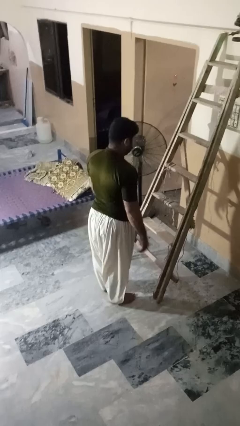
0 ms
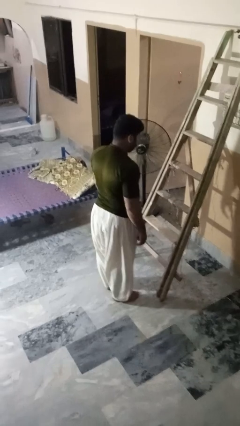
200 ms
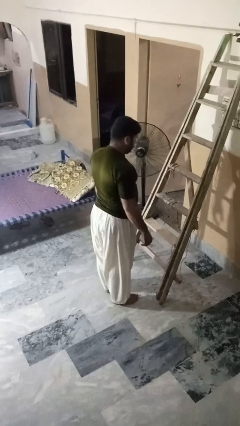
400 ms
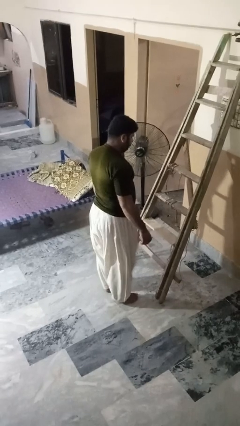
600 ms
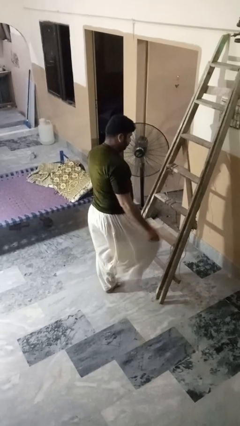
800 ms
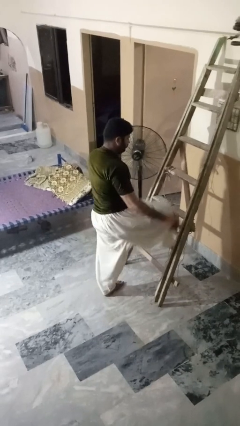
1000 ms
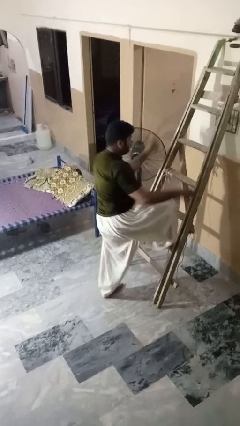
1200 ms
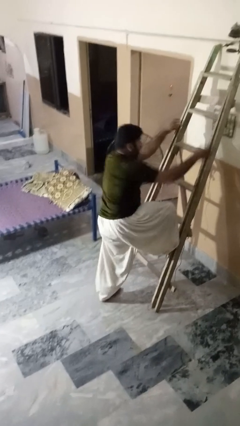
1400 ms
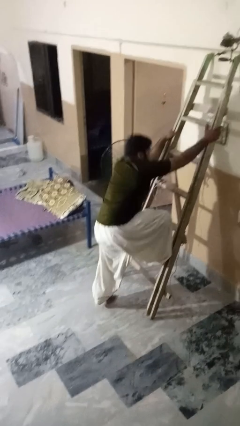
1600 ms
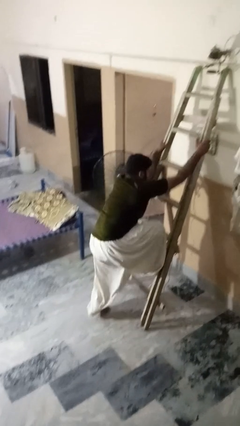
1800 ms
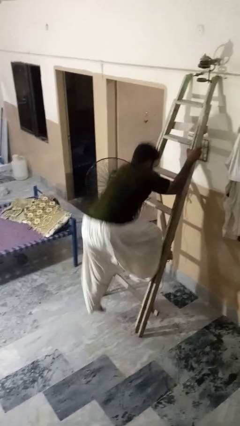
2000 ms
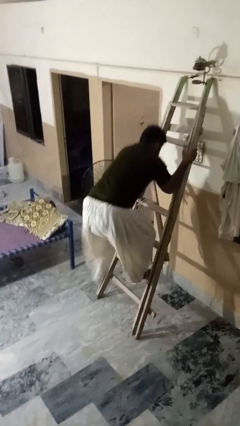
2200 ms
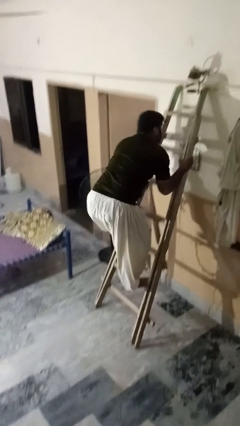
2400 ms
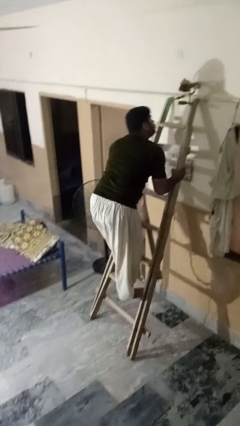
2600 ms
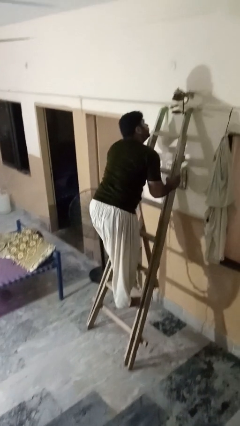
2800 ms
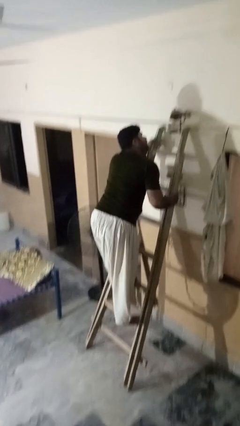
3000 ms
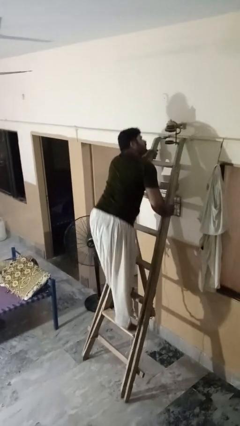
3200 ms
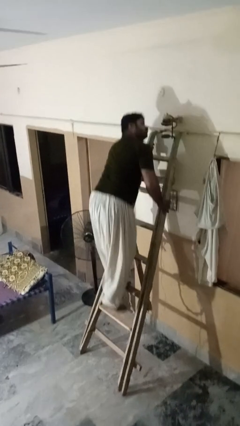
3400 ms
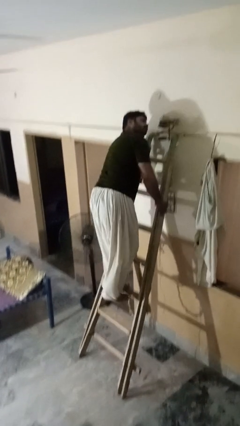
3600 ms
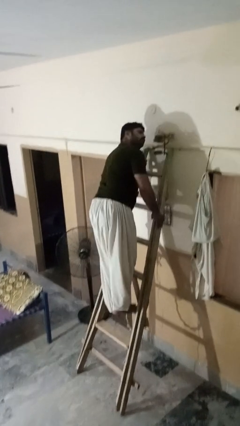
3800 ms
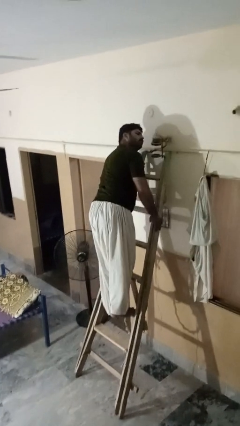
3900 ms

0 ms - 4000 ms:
person climbs up ladder

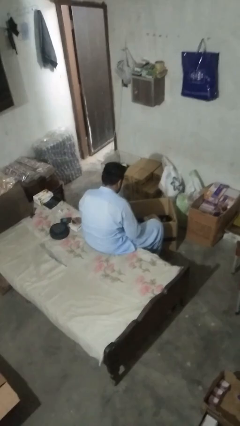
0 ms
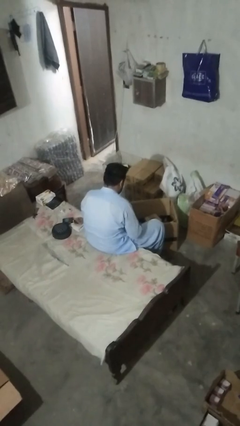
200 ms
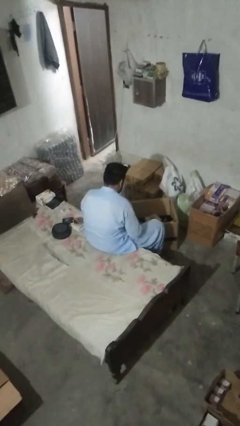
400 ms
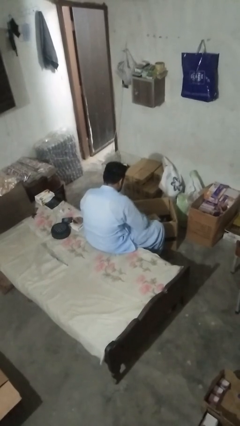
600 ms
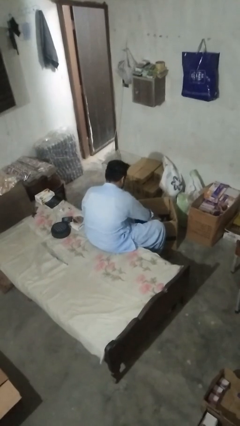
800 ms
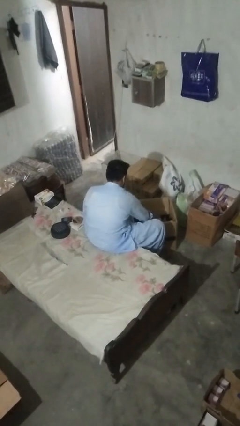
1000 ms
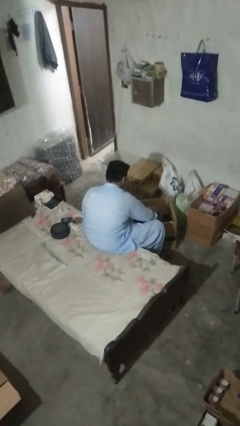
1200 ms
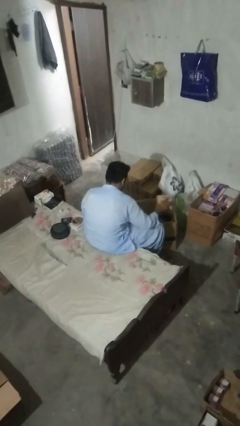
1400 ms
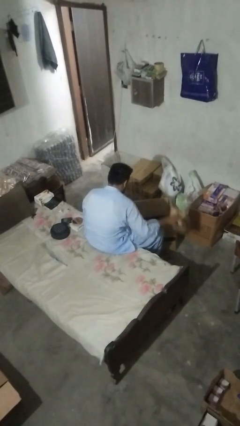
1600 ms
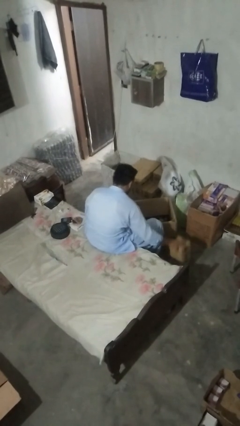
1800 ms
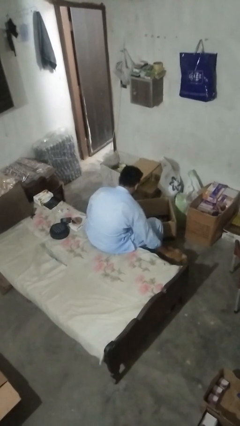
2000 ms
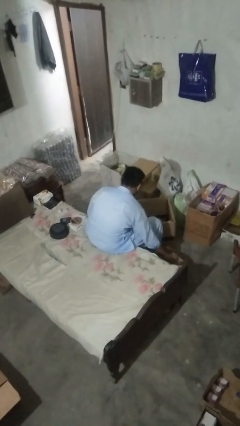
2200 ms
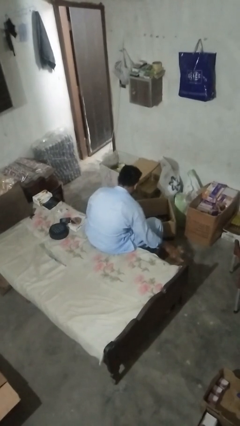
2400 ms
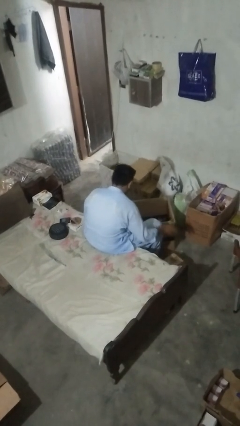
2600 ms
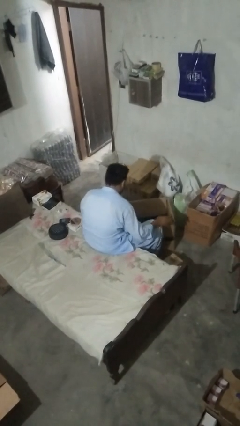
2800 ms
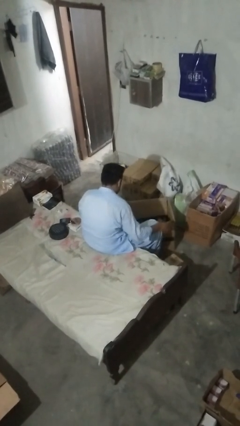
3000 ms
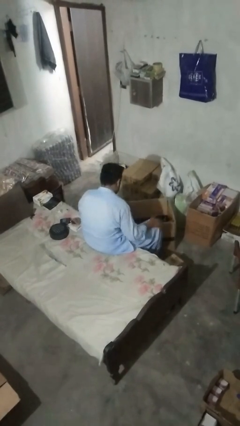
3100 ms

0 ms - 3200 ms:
person takes object from box

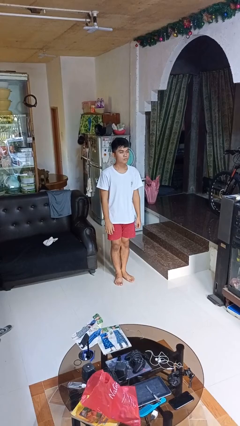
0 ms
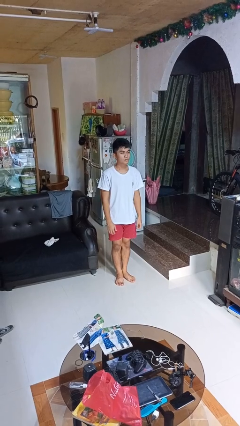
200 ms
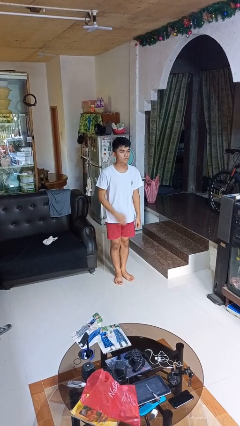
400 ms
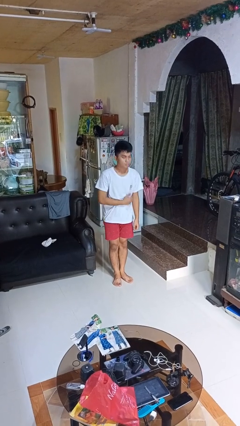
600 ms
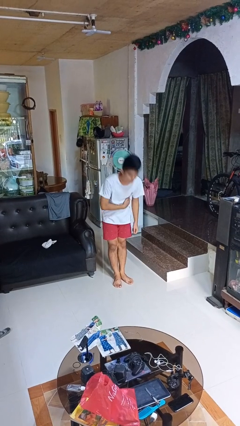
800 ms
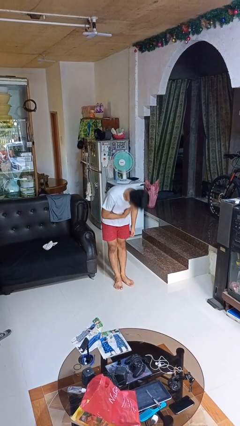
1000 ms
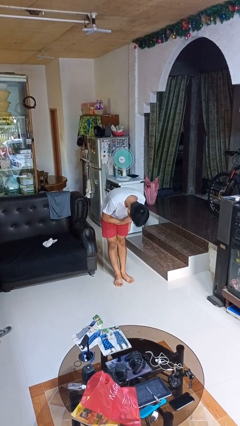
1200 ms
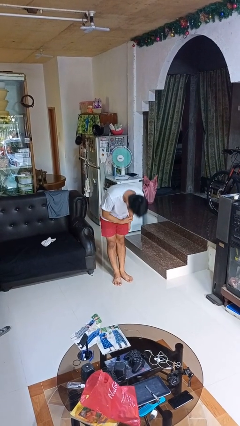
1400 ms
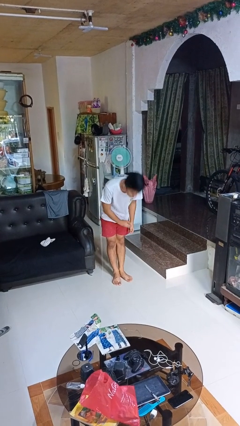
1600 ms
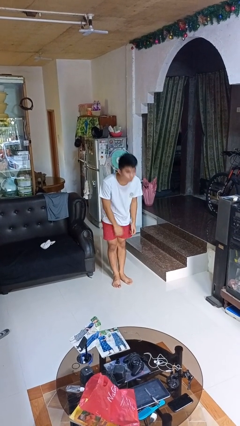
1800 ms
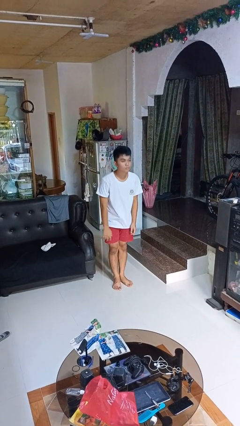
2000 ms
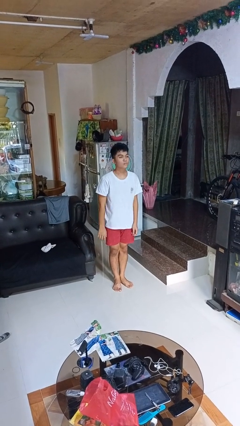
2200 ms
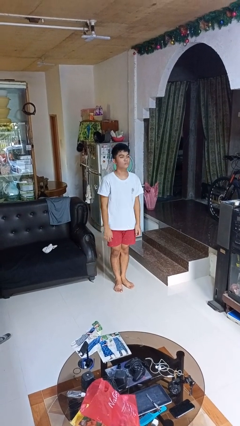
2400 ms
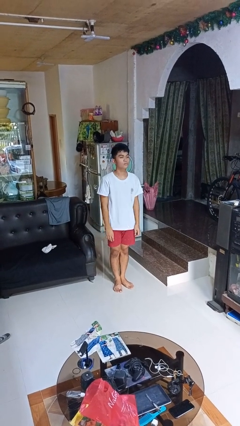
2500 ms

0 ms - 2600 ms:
person bows

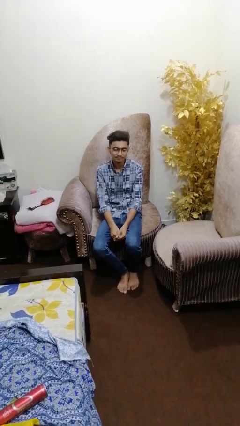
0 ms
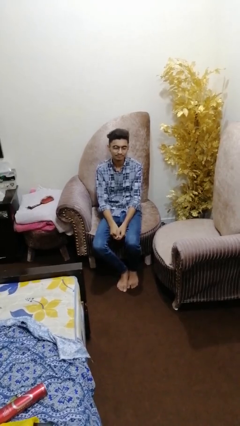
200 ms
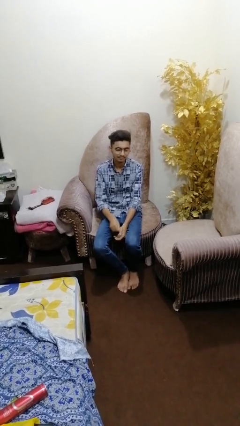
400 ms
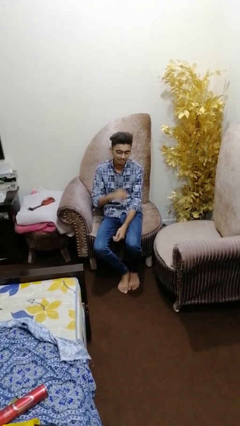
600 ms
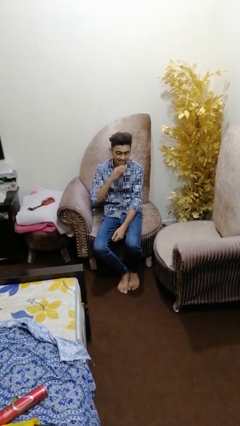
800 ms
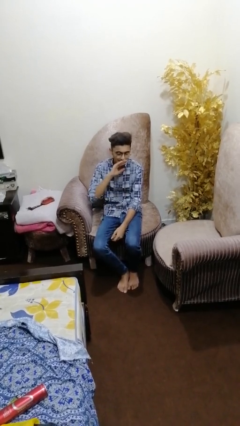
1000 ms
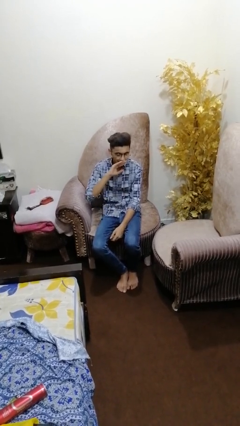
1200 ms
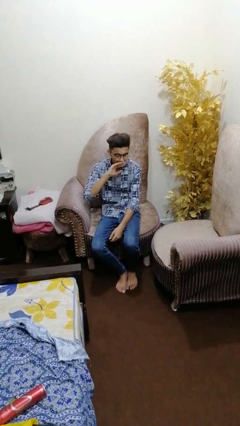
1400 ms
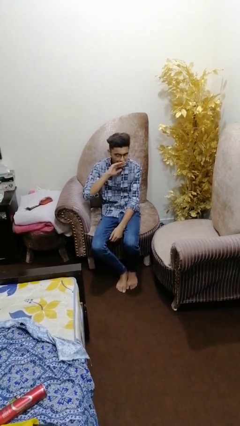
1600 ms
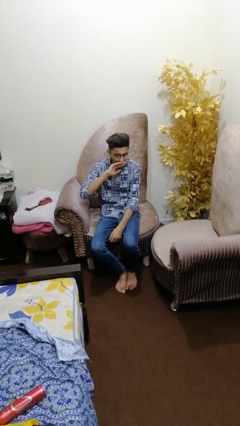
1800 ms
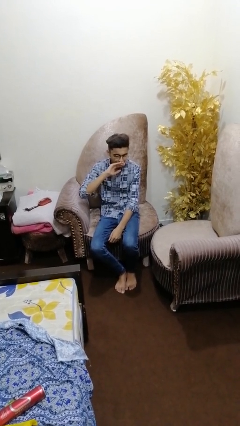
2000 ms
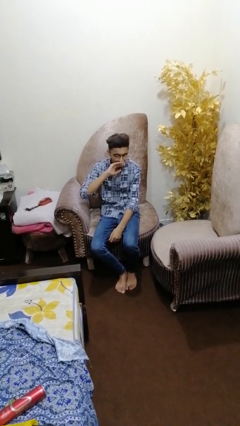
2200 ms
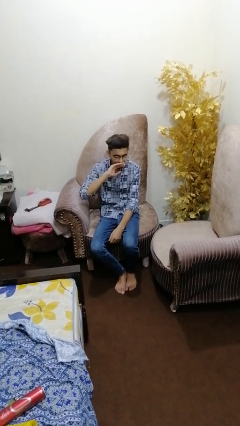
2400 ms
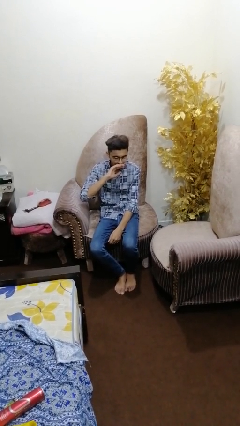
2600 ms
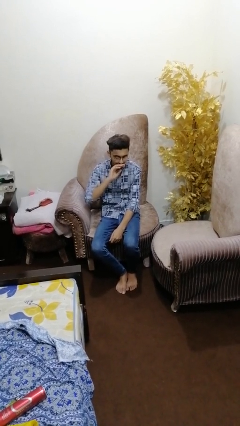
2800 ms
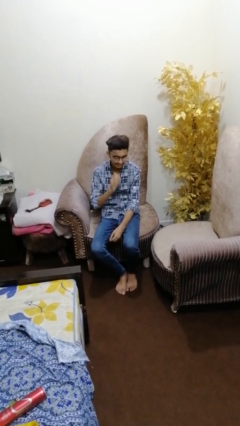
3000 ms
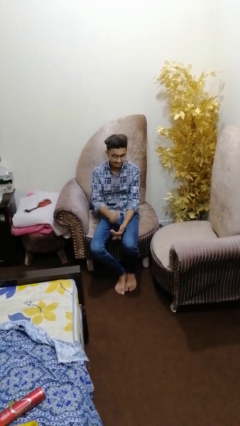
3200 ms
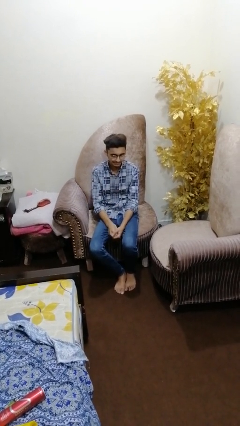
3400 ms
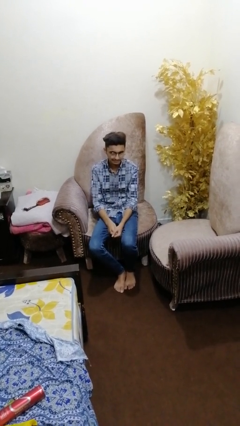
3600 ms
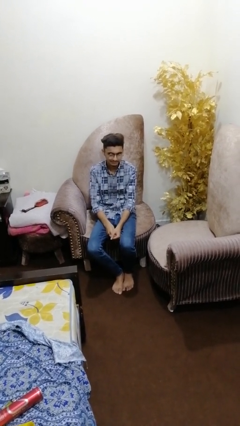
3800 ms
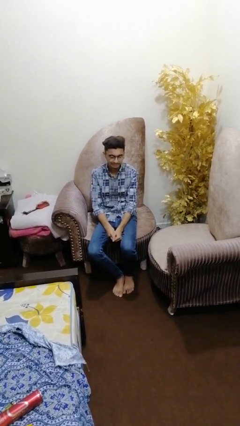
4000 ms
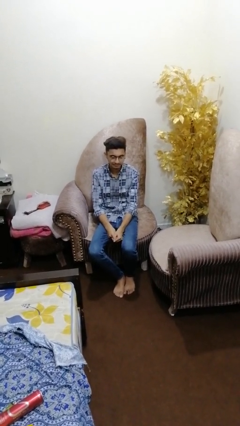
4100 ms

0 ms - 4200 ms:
person yawns

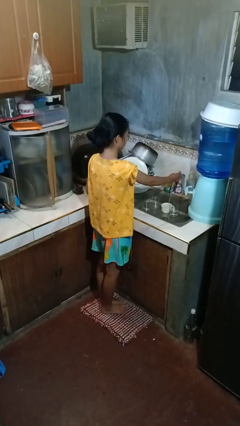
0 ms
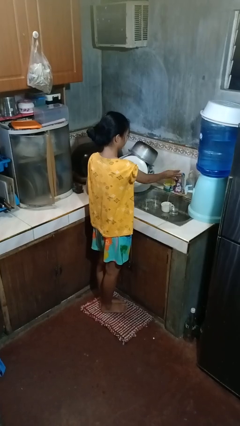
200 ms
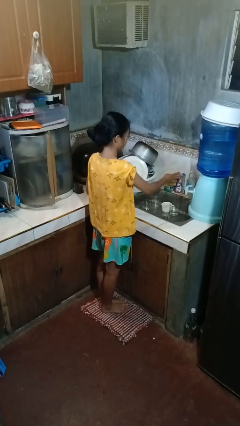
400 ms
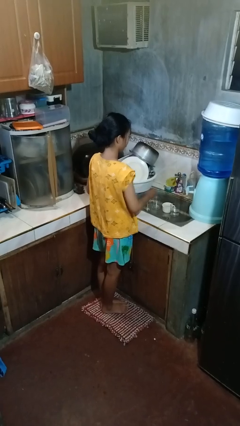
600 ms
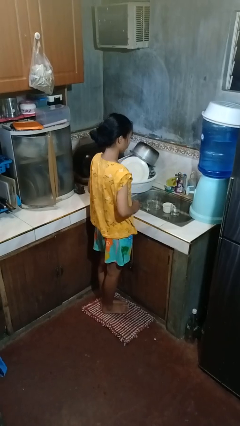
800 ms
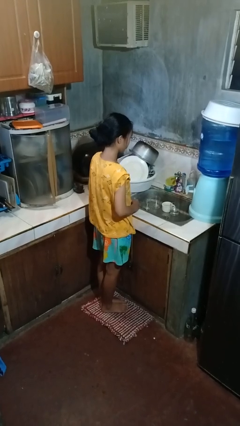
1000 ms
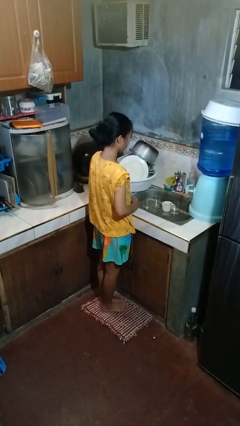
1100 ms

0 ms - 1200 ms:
person turns off faucet

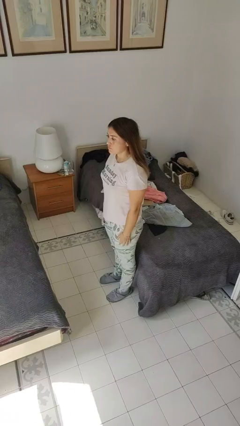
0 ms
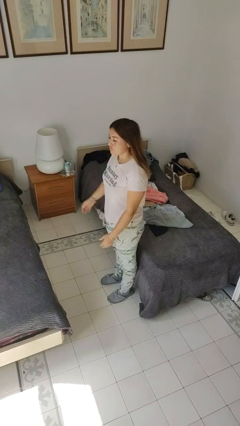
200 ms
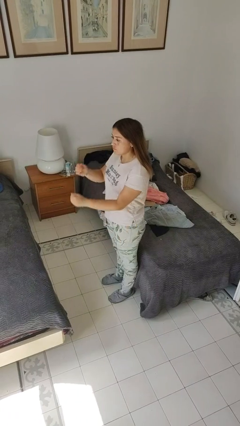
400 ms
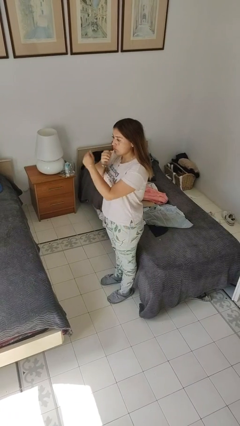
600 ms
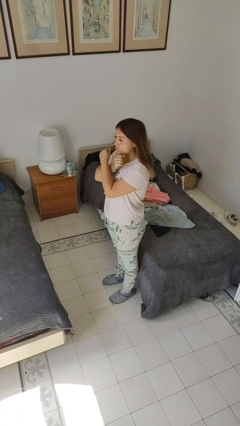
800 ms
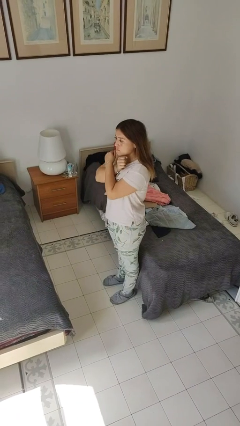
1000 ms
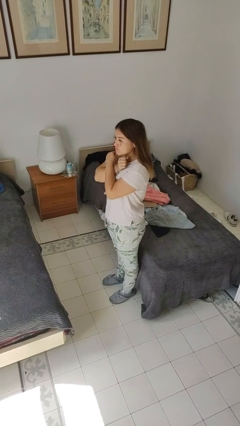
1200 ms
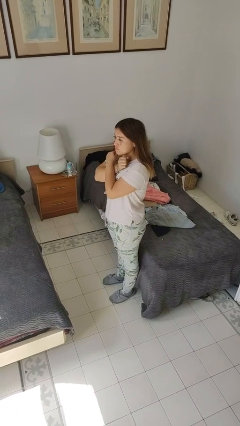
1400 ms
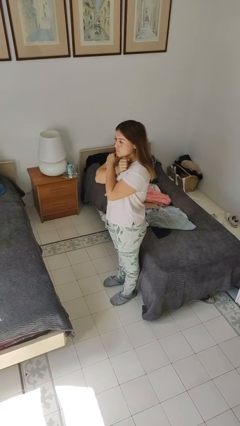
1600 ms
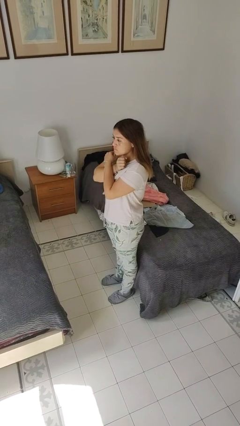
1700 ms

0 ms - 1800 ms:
person gestures arms x

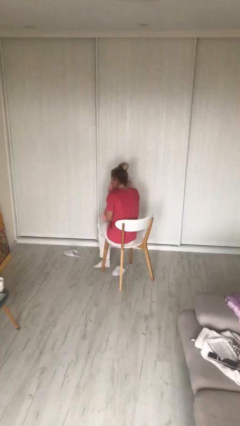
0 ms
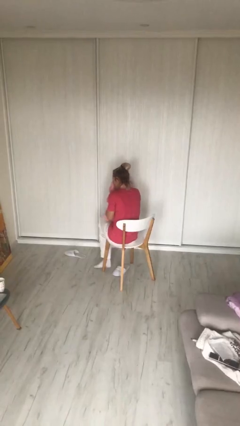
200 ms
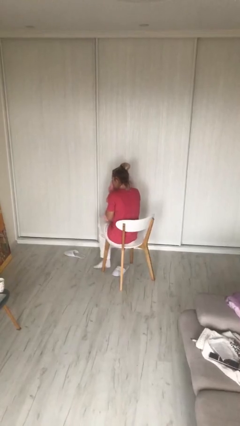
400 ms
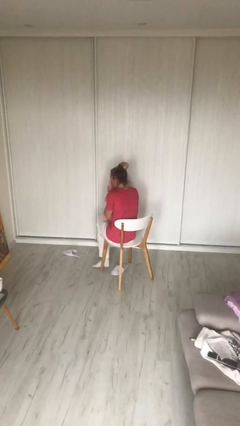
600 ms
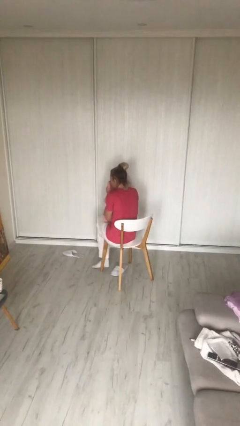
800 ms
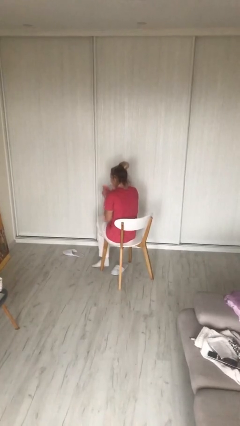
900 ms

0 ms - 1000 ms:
person blows nose
